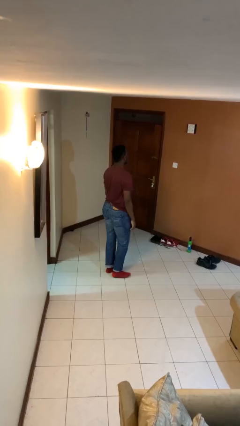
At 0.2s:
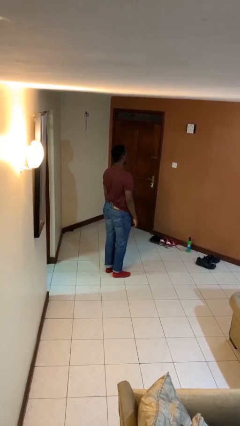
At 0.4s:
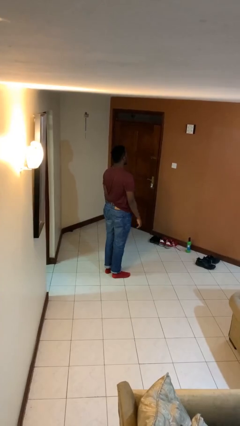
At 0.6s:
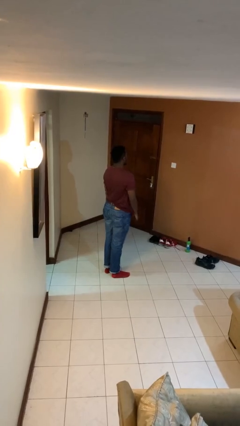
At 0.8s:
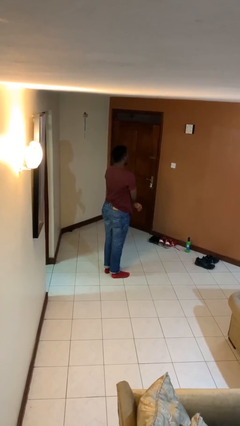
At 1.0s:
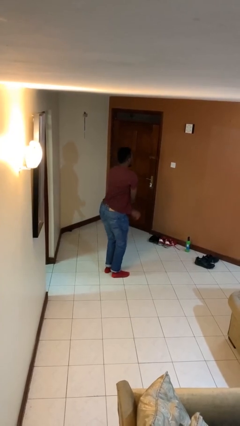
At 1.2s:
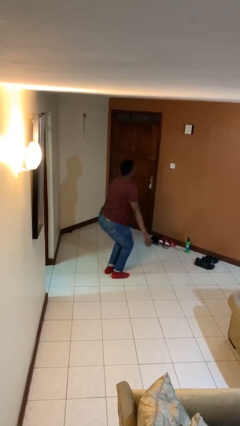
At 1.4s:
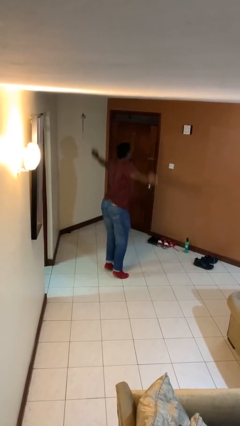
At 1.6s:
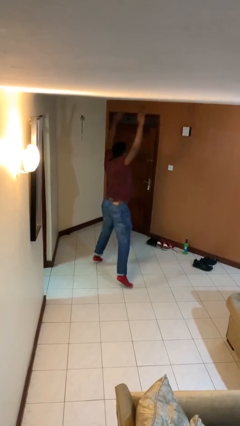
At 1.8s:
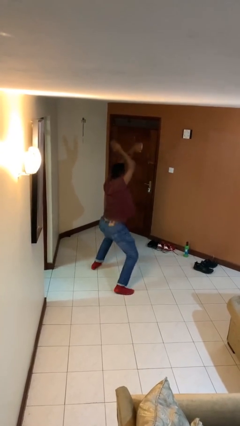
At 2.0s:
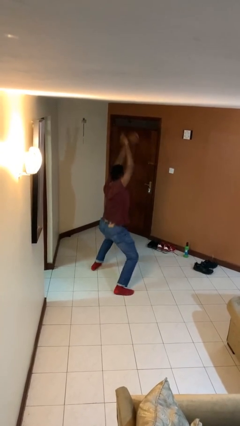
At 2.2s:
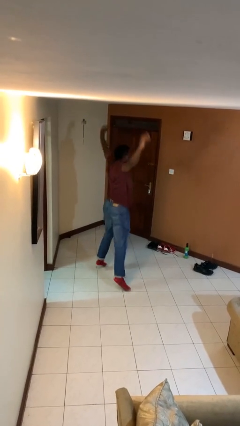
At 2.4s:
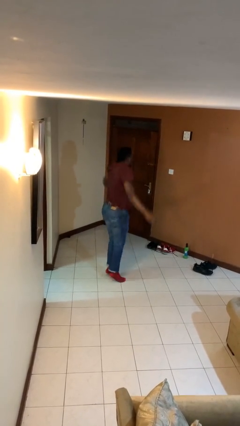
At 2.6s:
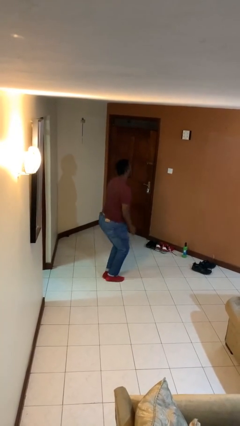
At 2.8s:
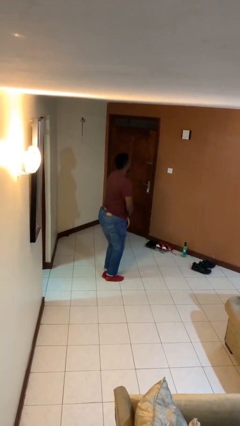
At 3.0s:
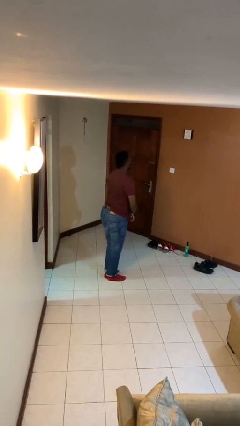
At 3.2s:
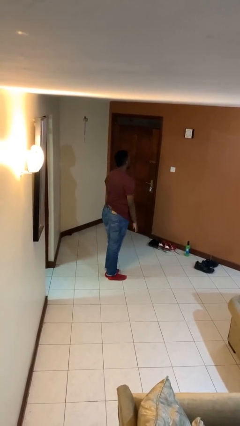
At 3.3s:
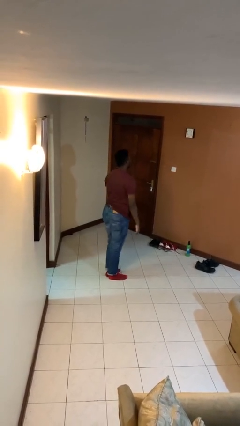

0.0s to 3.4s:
person exercises with jumping jacks

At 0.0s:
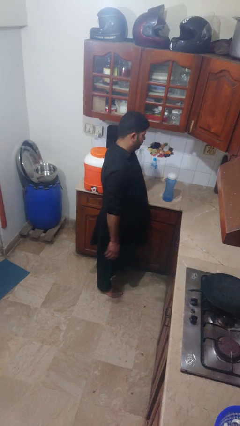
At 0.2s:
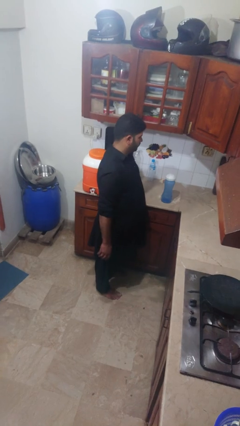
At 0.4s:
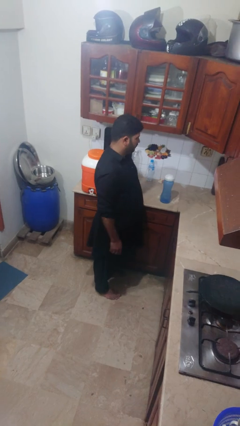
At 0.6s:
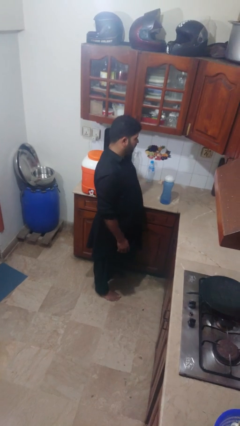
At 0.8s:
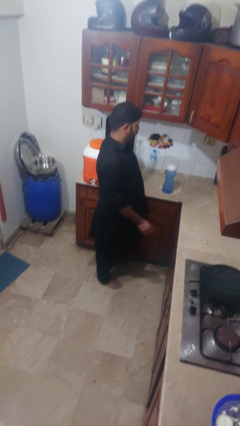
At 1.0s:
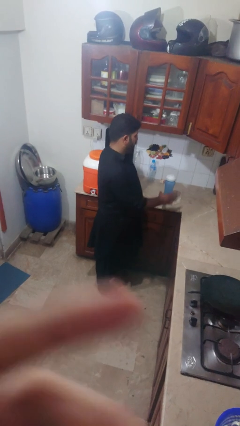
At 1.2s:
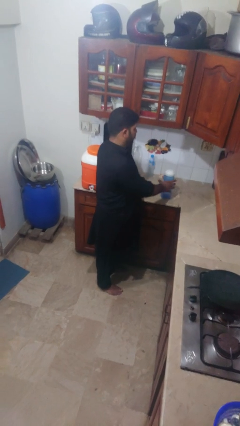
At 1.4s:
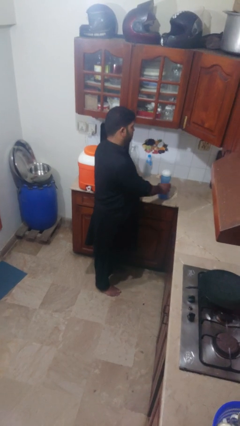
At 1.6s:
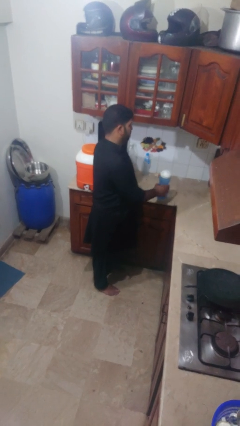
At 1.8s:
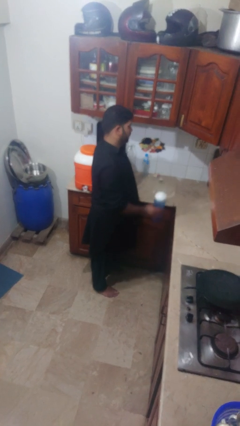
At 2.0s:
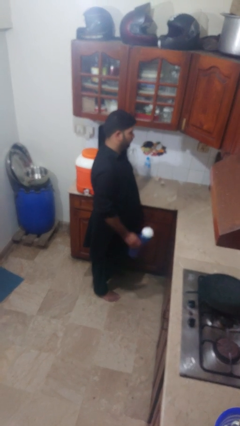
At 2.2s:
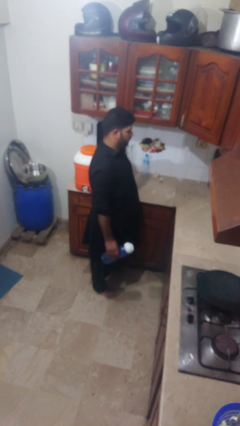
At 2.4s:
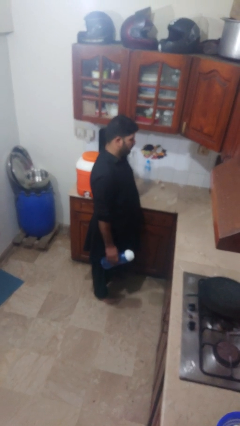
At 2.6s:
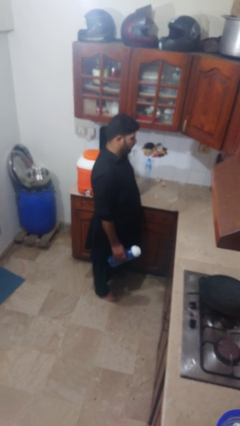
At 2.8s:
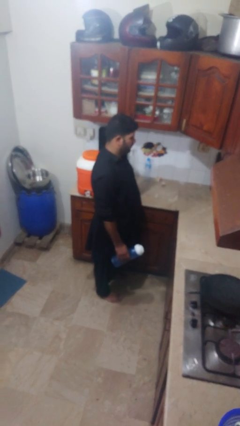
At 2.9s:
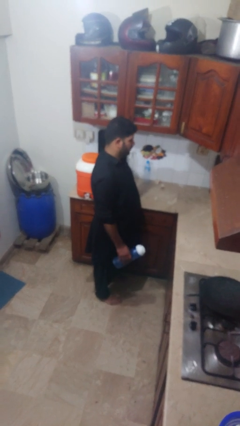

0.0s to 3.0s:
person picks up object from countertop

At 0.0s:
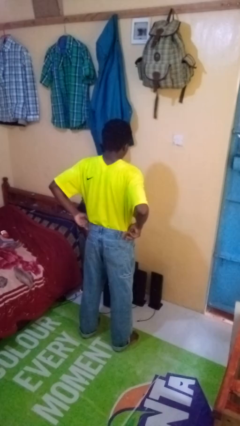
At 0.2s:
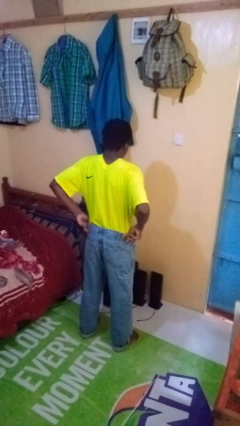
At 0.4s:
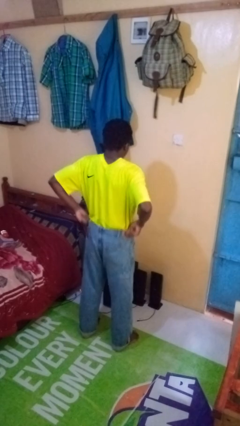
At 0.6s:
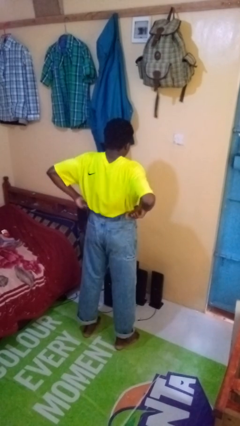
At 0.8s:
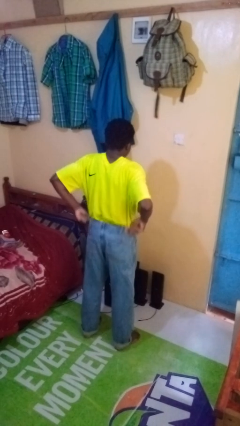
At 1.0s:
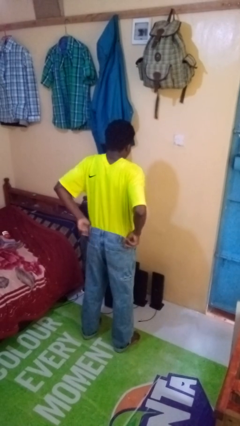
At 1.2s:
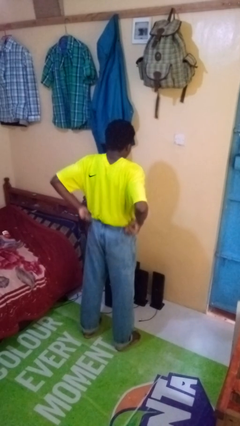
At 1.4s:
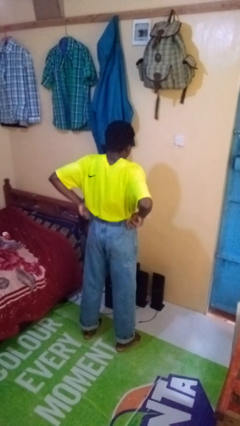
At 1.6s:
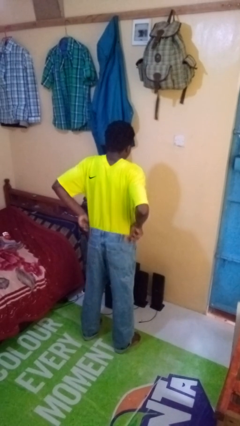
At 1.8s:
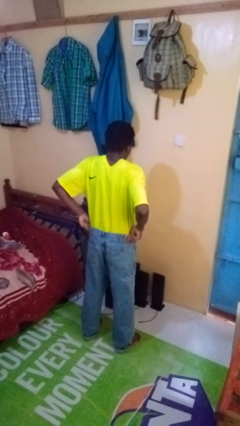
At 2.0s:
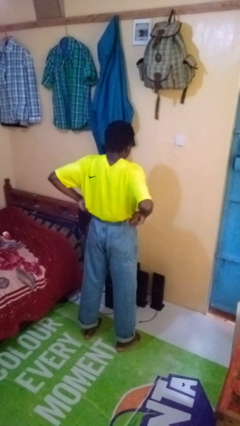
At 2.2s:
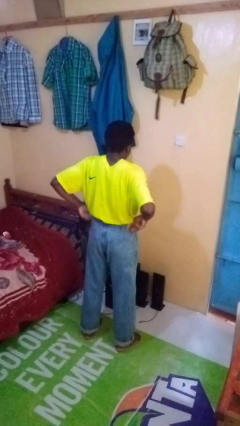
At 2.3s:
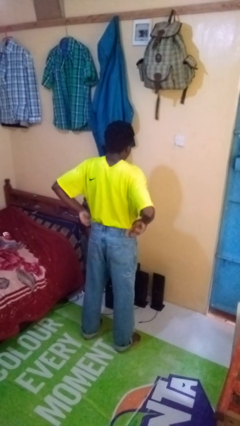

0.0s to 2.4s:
person hikes up pants

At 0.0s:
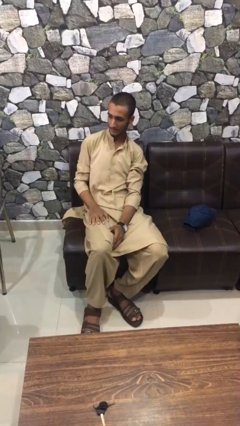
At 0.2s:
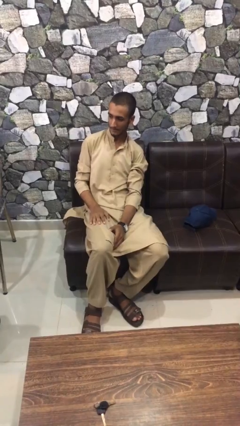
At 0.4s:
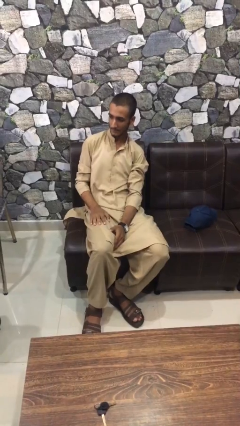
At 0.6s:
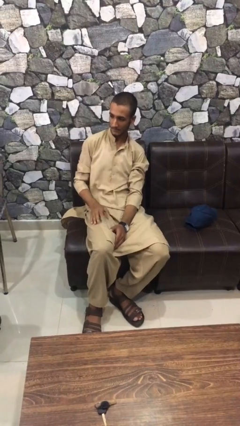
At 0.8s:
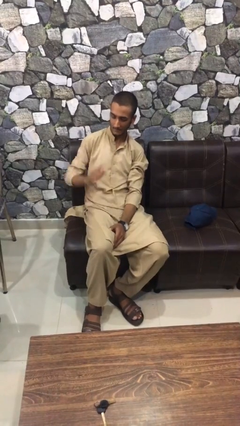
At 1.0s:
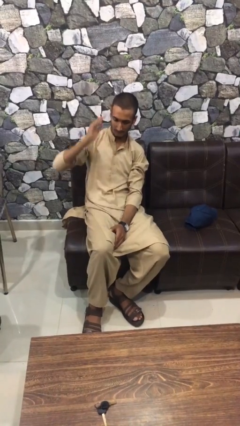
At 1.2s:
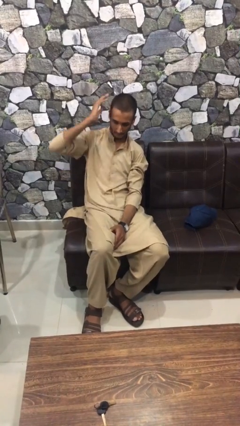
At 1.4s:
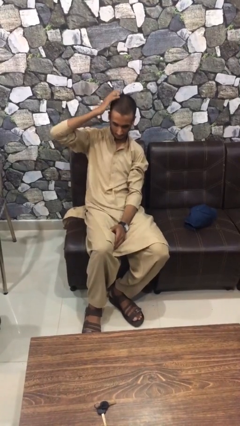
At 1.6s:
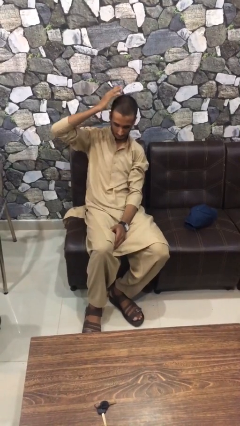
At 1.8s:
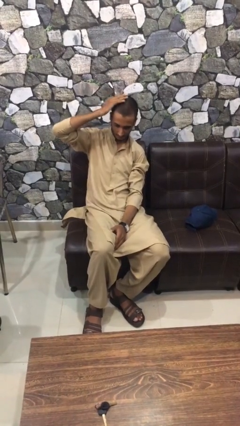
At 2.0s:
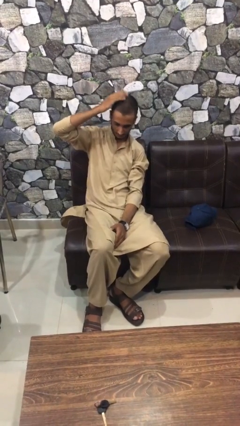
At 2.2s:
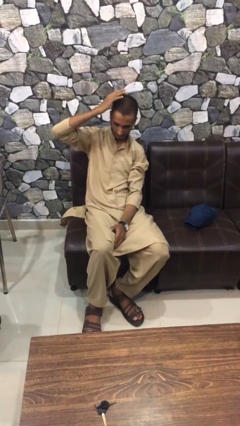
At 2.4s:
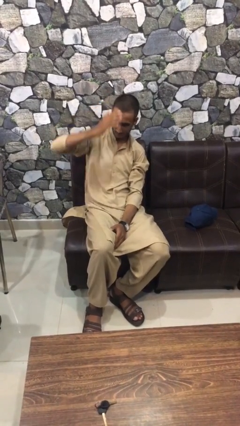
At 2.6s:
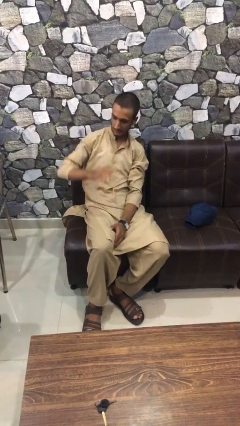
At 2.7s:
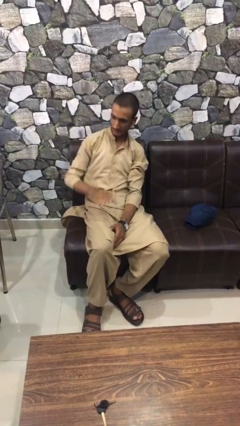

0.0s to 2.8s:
person pats head

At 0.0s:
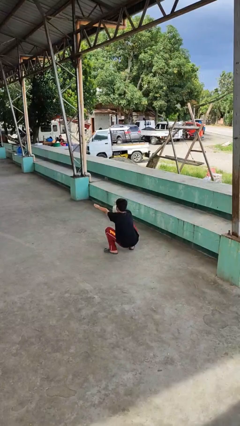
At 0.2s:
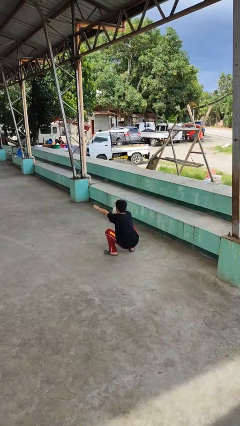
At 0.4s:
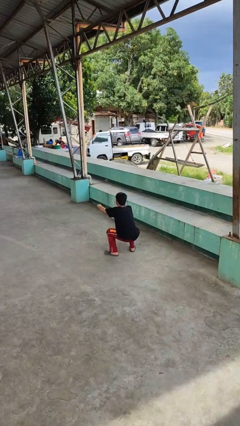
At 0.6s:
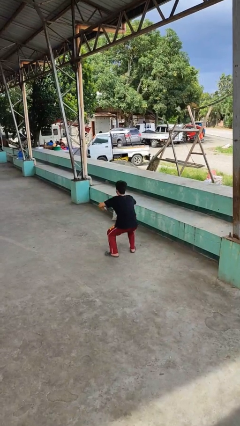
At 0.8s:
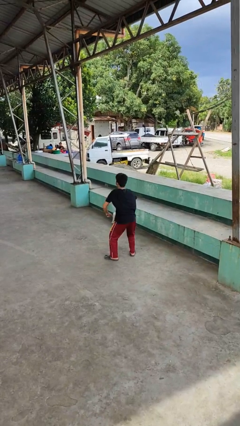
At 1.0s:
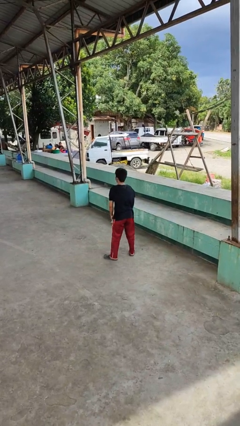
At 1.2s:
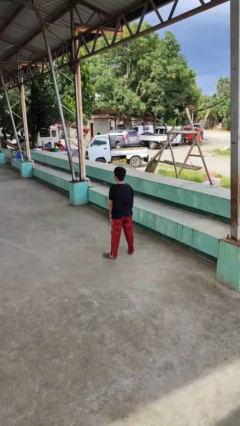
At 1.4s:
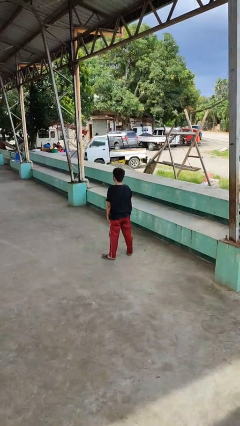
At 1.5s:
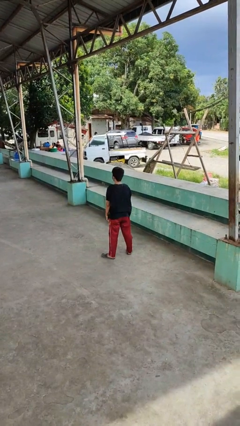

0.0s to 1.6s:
person stands up

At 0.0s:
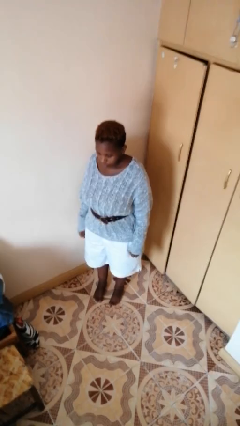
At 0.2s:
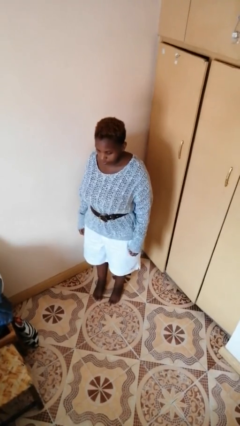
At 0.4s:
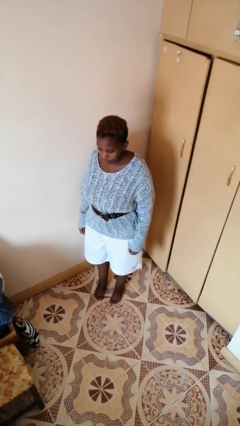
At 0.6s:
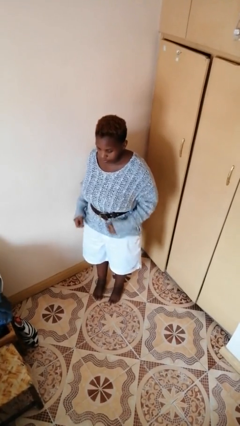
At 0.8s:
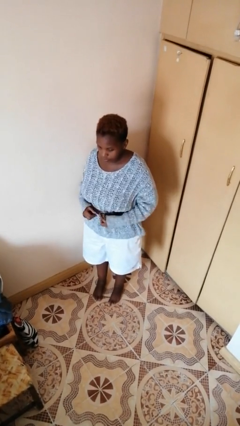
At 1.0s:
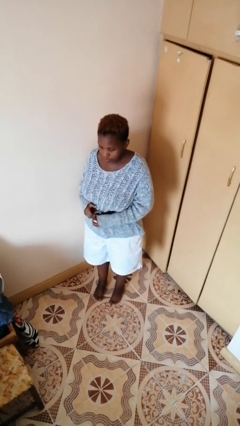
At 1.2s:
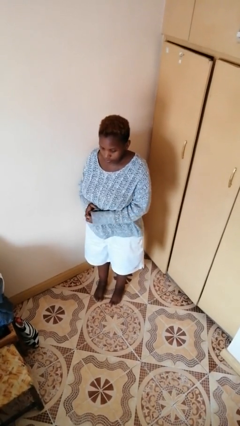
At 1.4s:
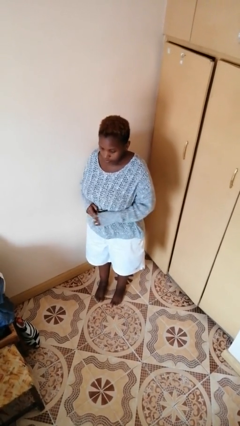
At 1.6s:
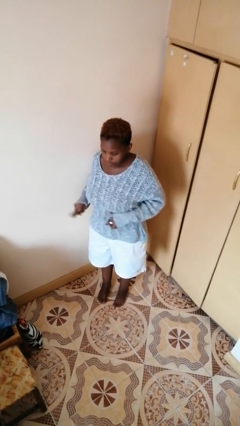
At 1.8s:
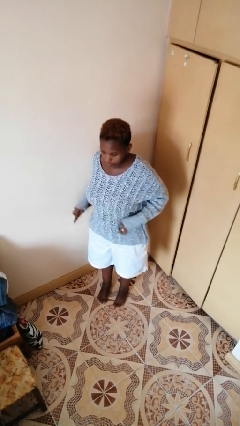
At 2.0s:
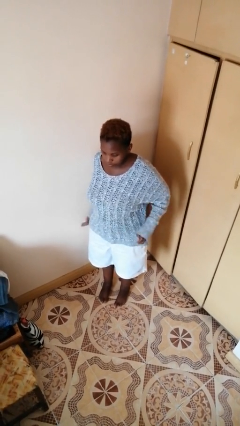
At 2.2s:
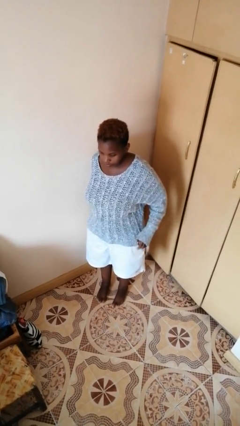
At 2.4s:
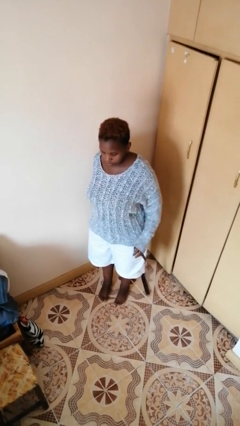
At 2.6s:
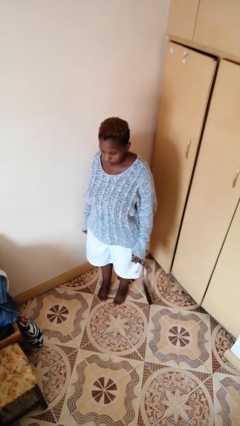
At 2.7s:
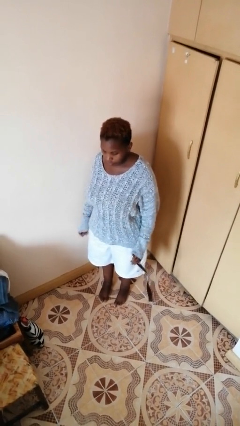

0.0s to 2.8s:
person takes off belt

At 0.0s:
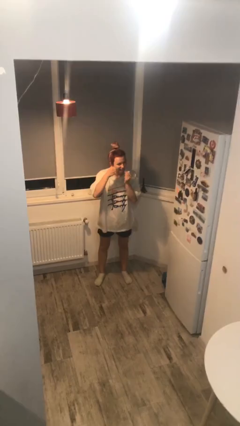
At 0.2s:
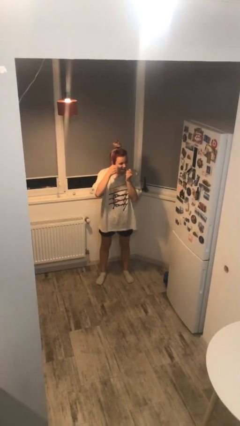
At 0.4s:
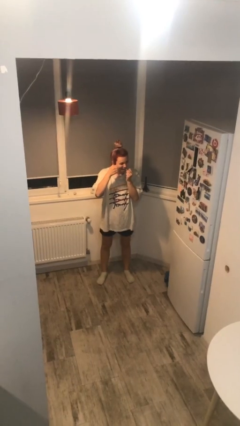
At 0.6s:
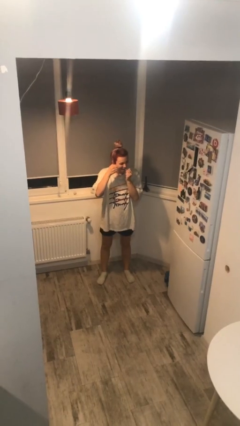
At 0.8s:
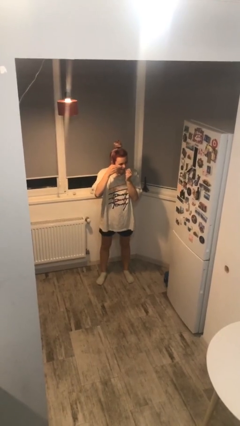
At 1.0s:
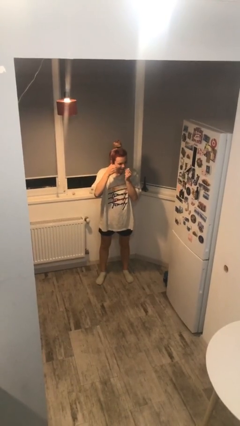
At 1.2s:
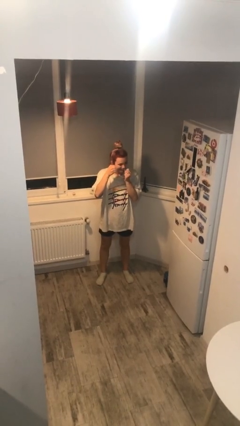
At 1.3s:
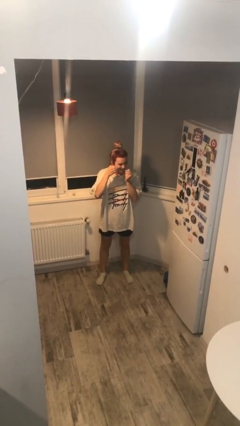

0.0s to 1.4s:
person flosses

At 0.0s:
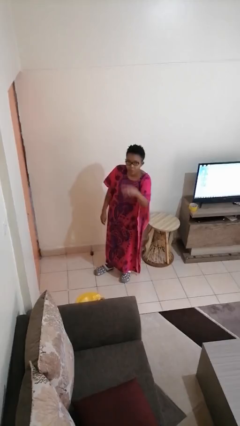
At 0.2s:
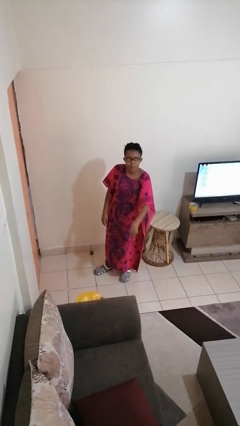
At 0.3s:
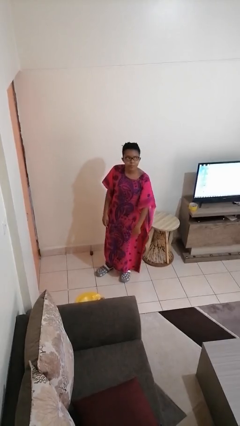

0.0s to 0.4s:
person gestures watch closely
